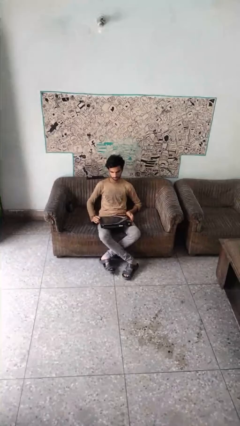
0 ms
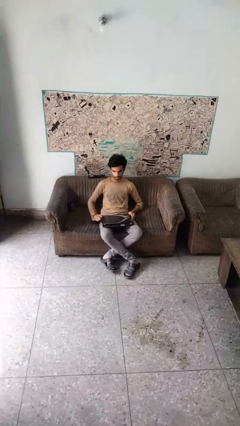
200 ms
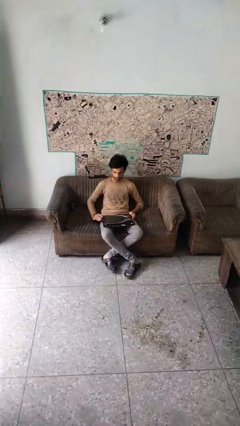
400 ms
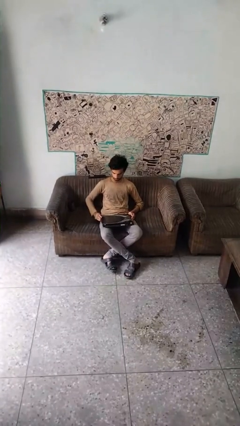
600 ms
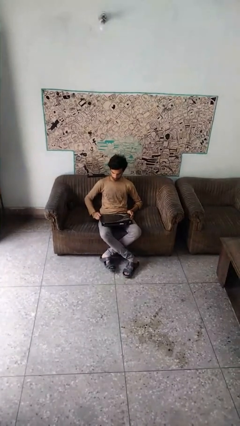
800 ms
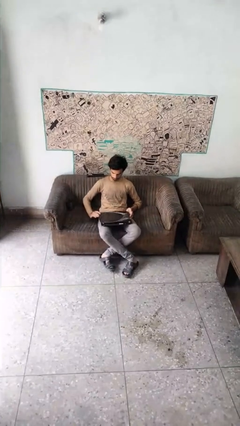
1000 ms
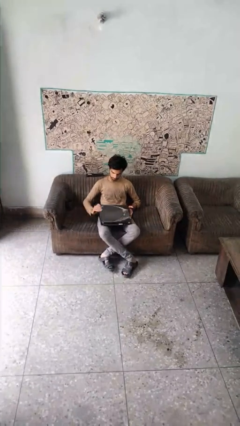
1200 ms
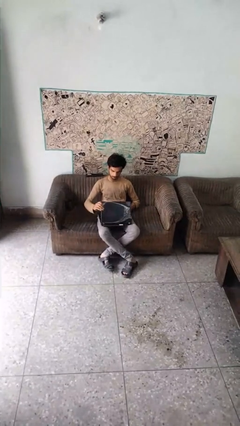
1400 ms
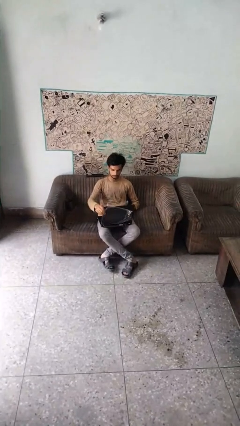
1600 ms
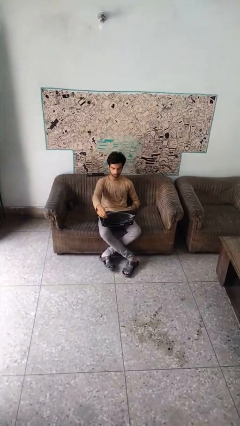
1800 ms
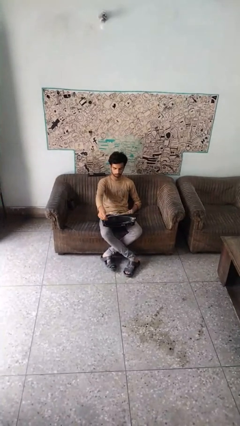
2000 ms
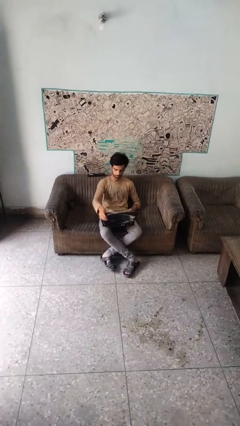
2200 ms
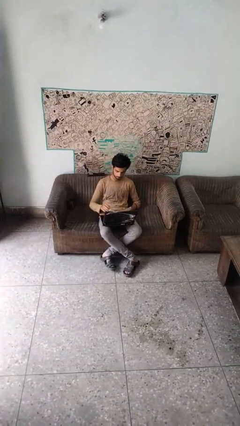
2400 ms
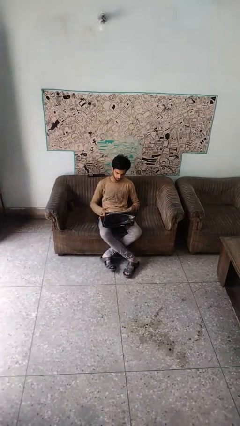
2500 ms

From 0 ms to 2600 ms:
person opens laptop

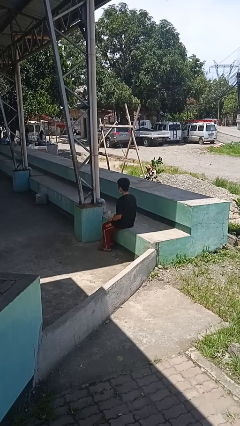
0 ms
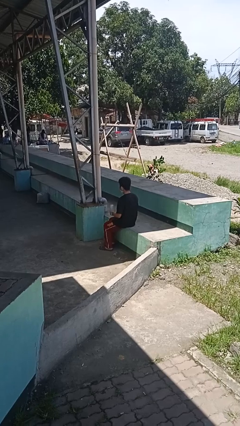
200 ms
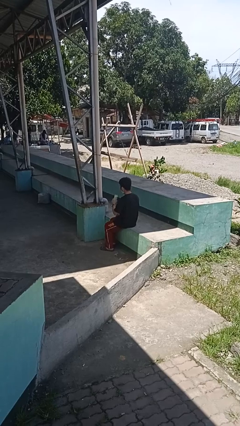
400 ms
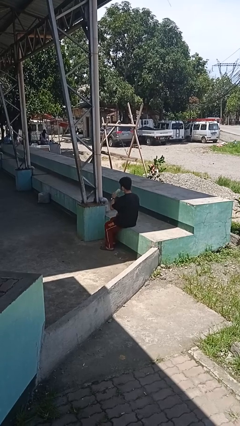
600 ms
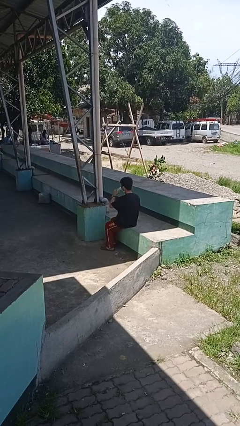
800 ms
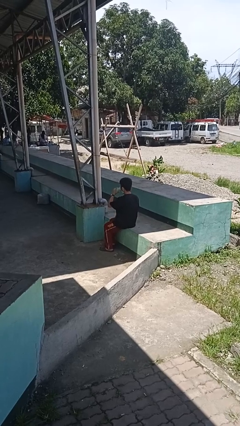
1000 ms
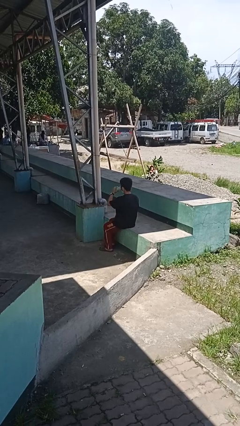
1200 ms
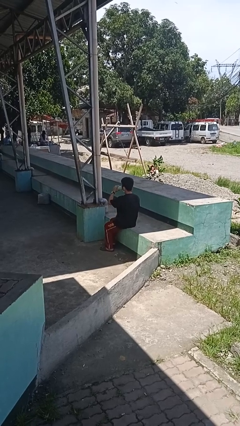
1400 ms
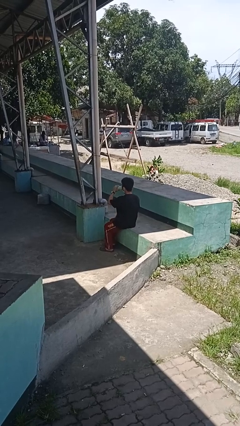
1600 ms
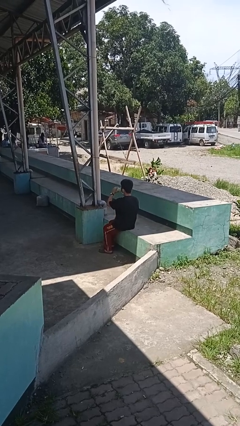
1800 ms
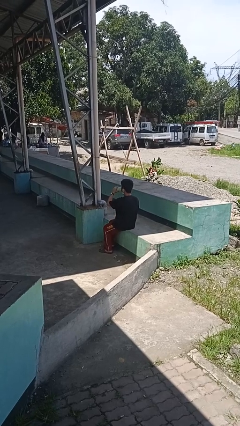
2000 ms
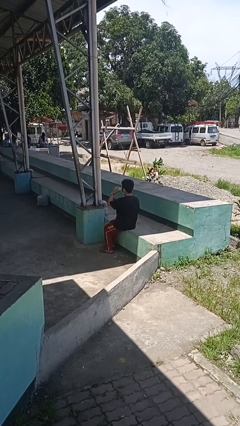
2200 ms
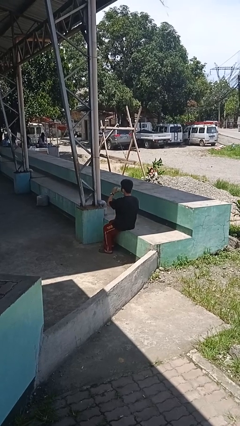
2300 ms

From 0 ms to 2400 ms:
person drinks from bottle

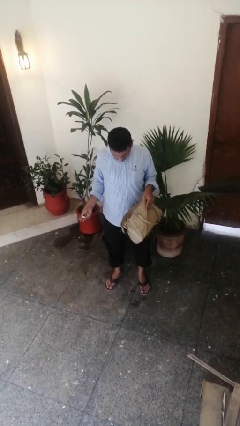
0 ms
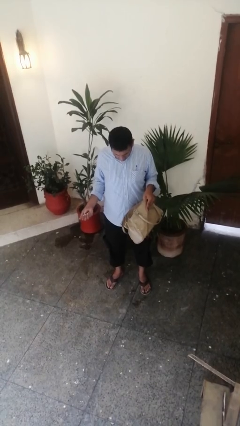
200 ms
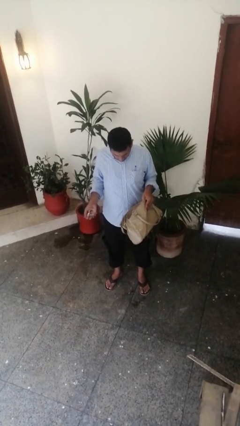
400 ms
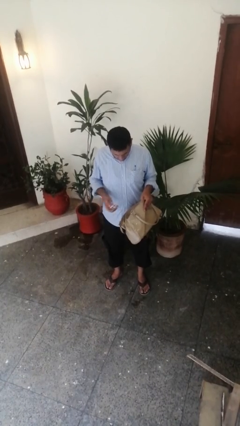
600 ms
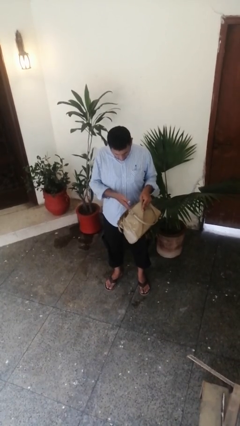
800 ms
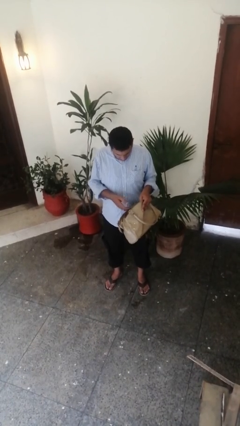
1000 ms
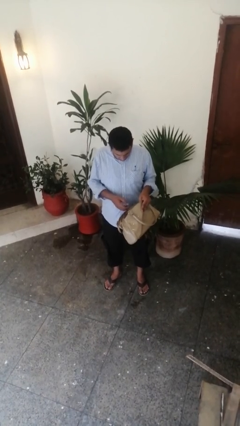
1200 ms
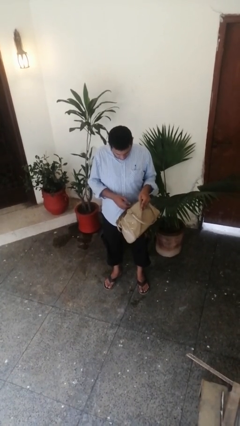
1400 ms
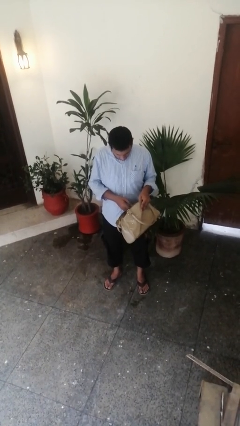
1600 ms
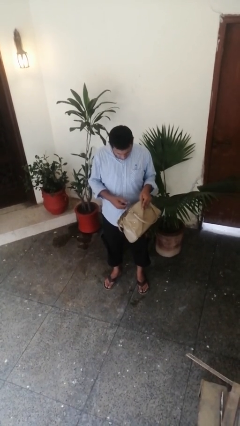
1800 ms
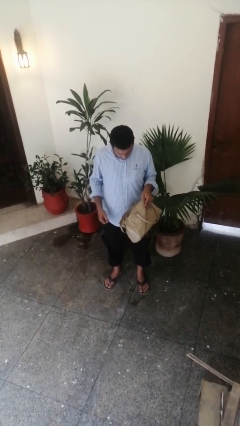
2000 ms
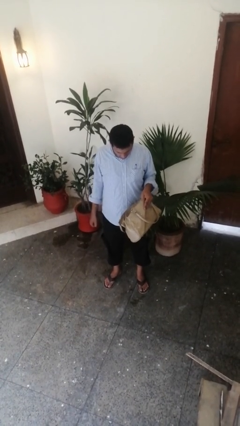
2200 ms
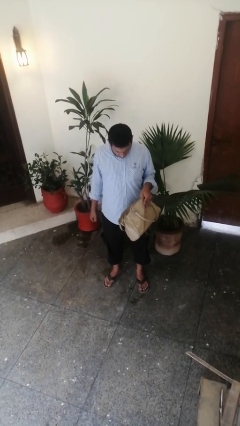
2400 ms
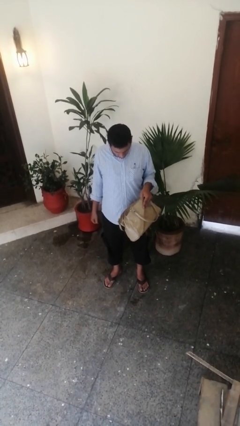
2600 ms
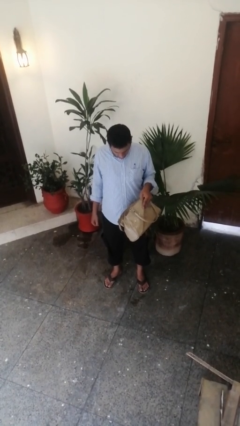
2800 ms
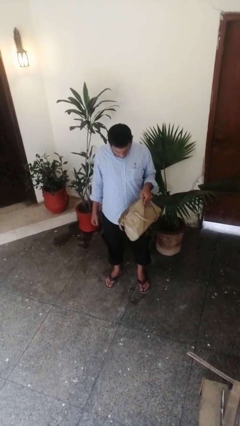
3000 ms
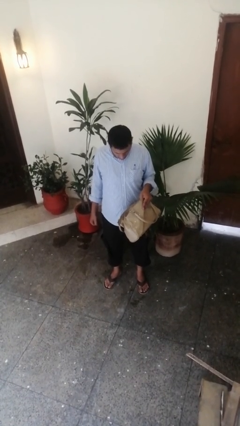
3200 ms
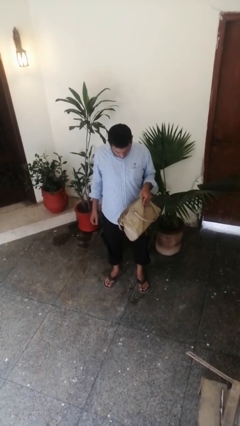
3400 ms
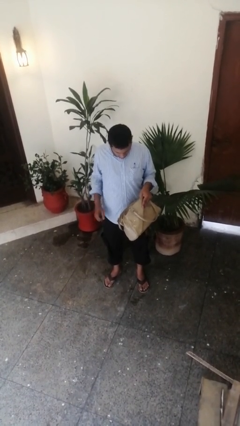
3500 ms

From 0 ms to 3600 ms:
person puts object into purse

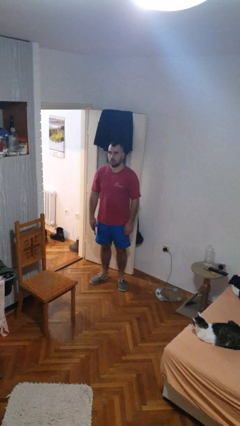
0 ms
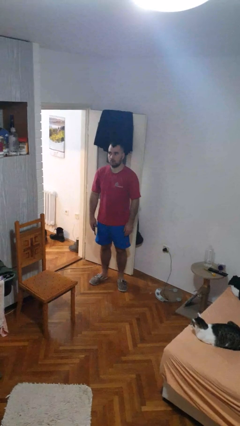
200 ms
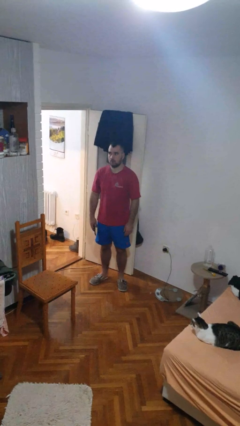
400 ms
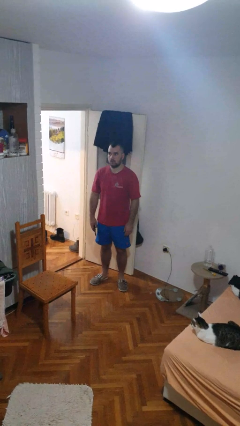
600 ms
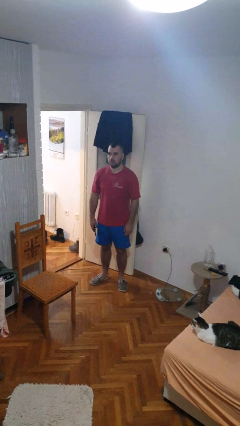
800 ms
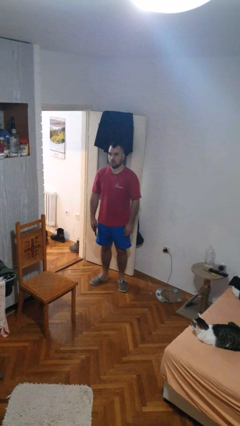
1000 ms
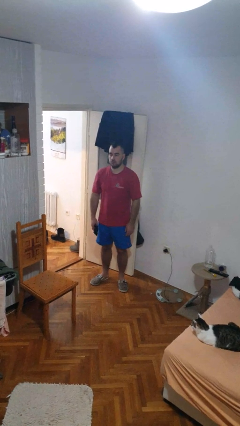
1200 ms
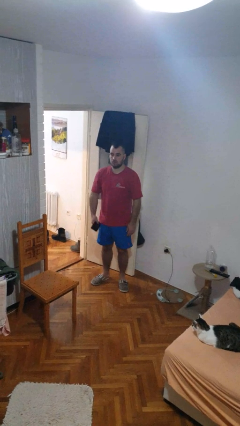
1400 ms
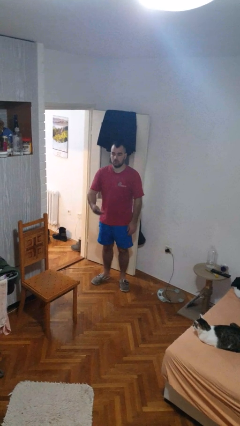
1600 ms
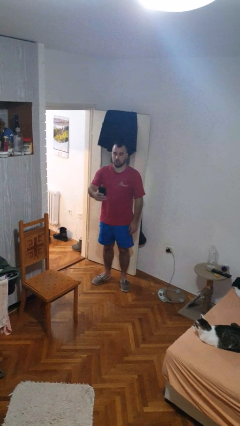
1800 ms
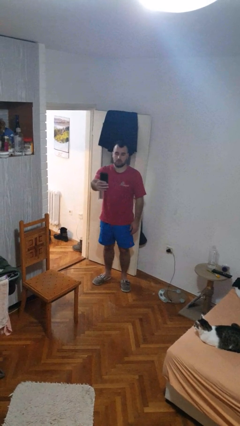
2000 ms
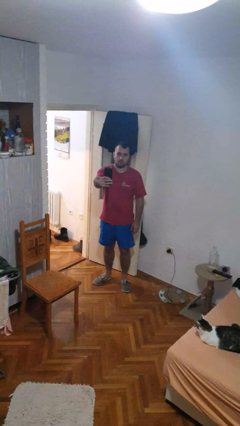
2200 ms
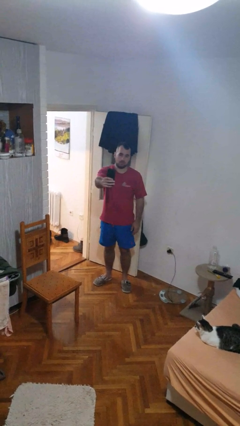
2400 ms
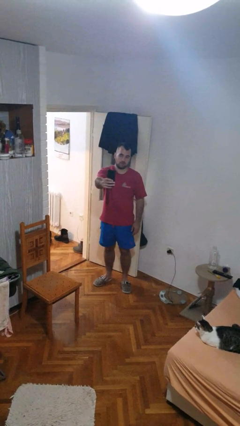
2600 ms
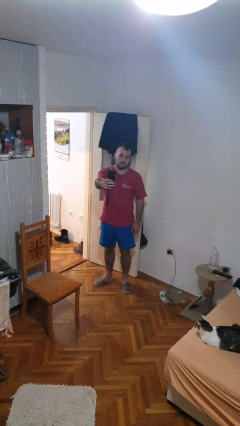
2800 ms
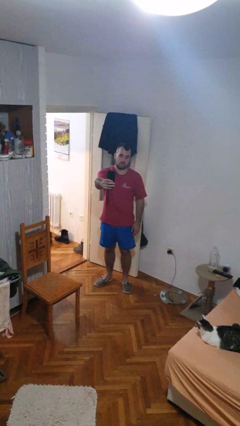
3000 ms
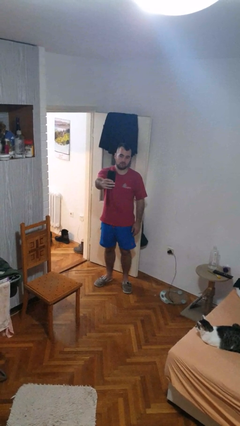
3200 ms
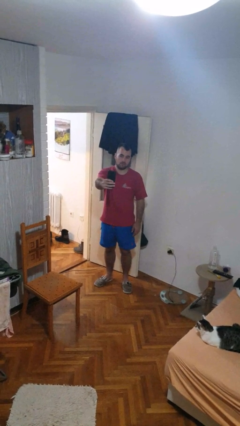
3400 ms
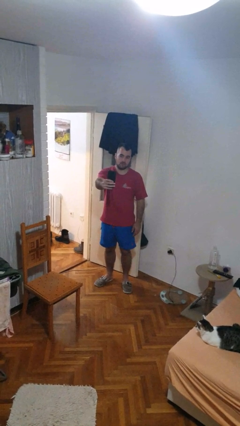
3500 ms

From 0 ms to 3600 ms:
person takes selfie

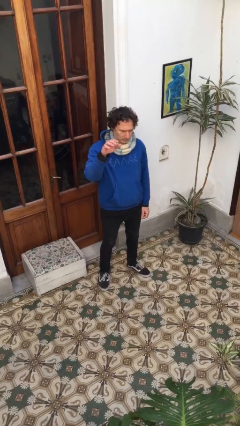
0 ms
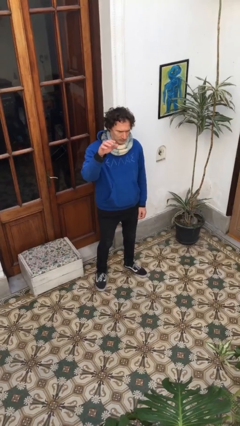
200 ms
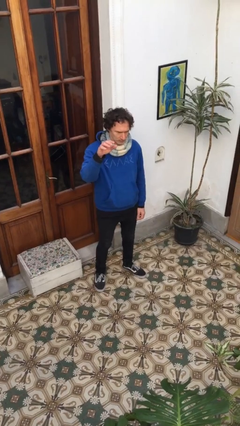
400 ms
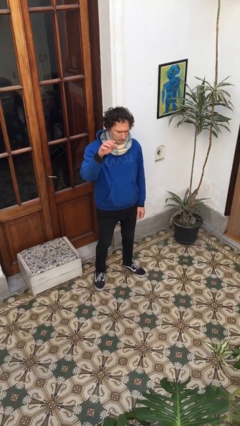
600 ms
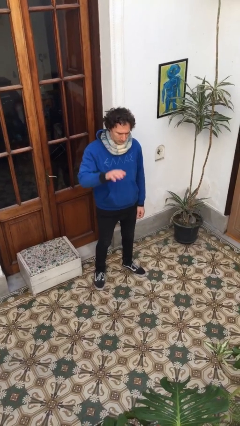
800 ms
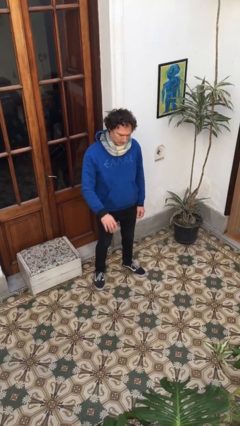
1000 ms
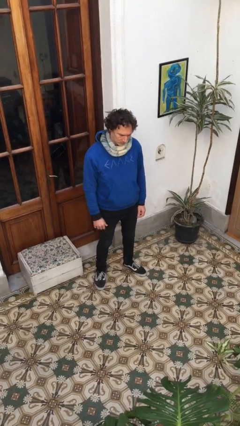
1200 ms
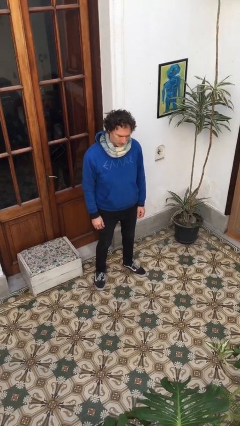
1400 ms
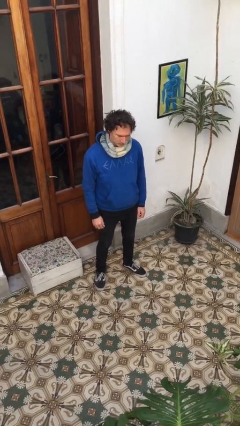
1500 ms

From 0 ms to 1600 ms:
person gestures swipe down

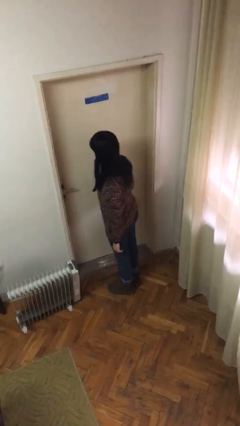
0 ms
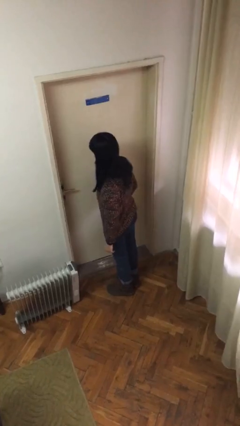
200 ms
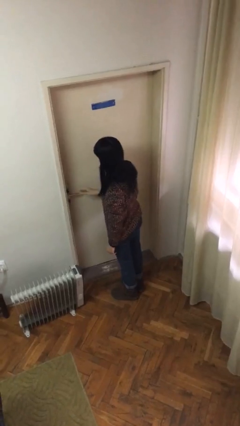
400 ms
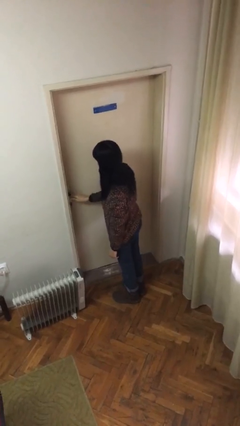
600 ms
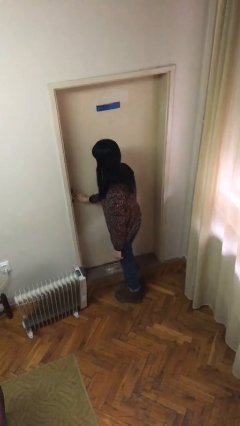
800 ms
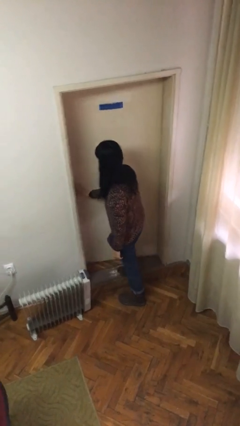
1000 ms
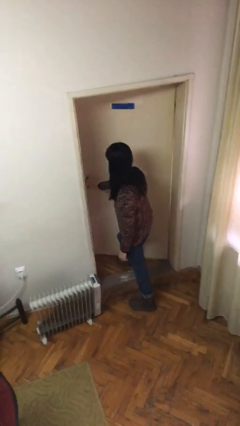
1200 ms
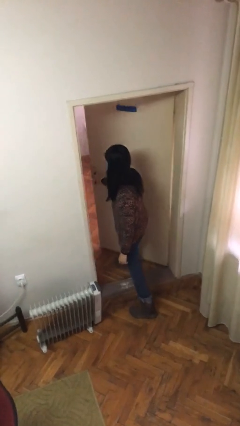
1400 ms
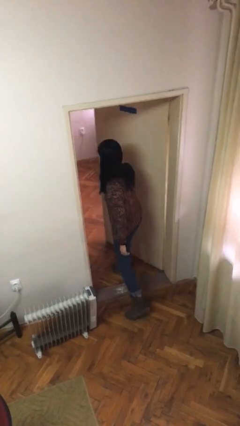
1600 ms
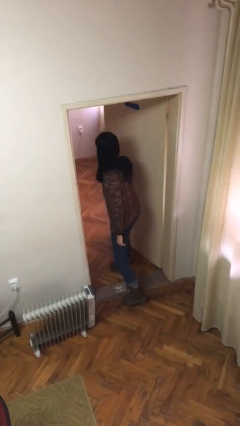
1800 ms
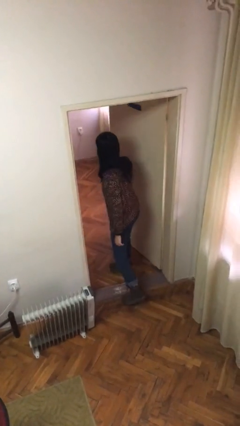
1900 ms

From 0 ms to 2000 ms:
person opens facility door

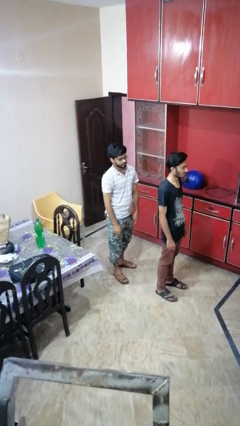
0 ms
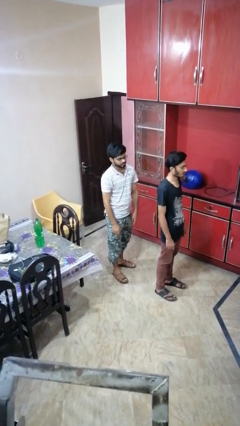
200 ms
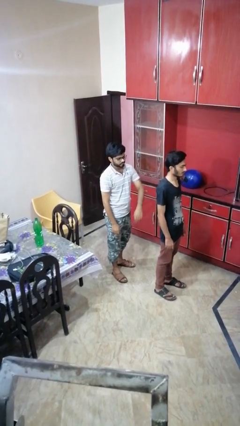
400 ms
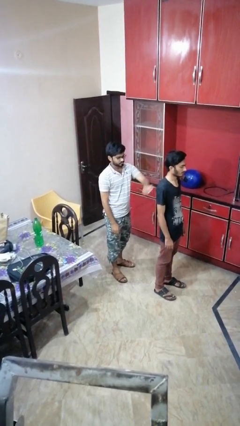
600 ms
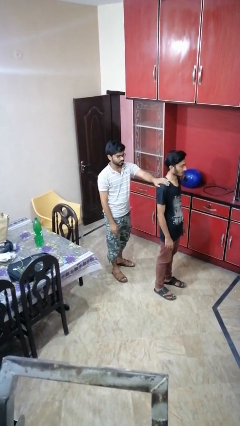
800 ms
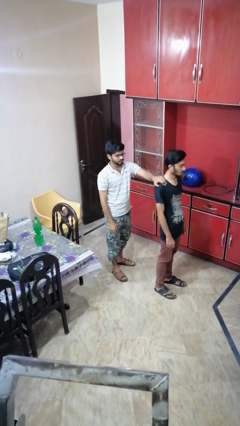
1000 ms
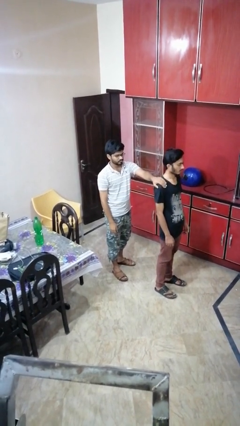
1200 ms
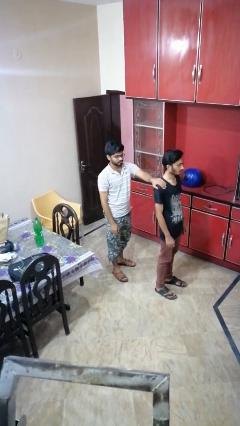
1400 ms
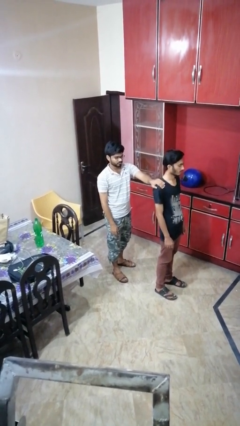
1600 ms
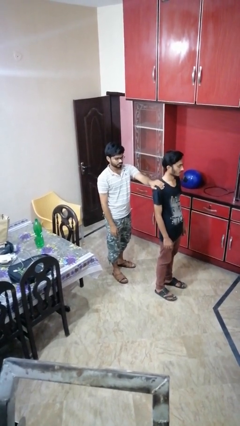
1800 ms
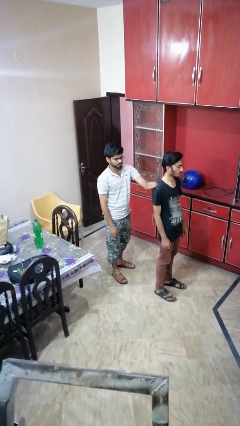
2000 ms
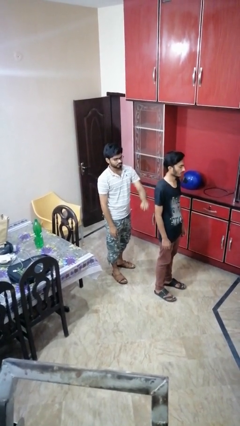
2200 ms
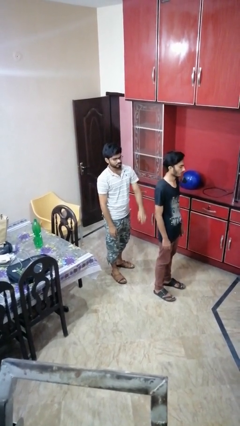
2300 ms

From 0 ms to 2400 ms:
person touches back of person
